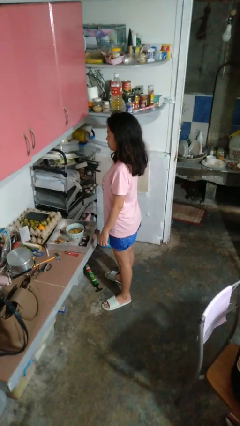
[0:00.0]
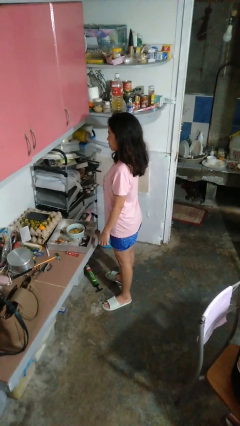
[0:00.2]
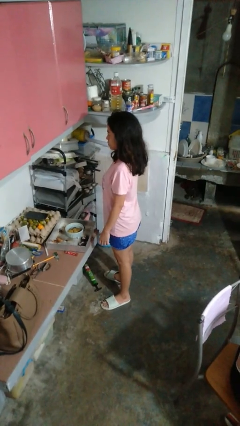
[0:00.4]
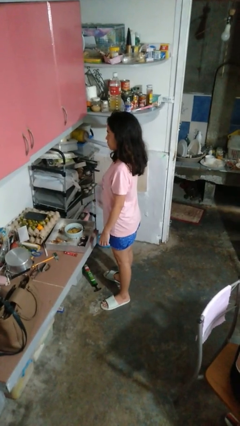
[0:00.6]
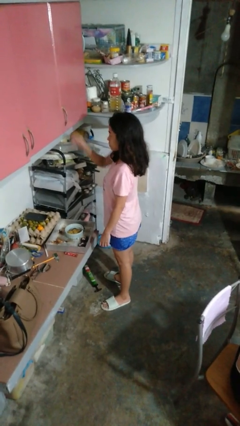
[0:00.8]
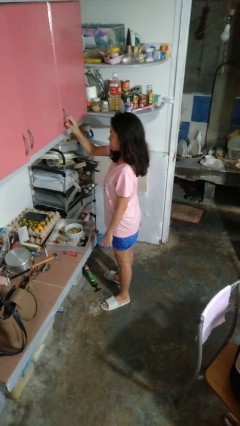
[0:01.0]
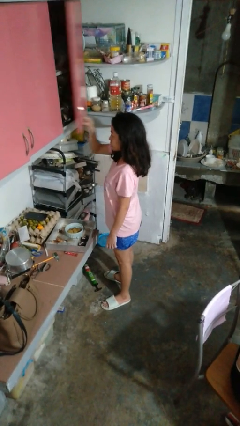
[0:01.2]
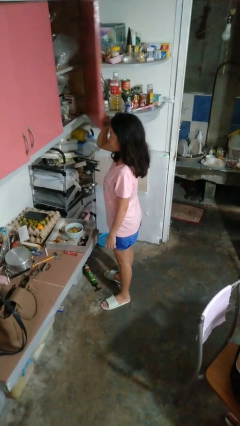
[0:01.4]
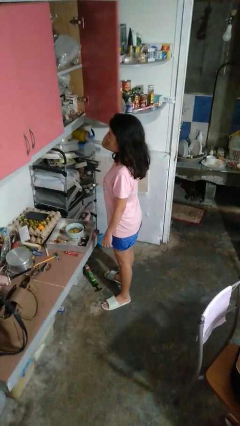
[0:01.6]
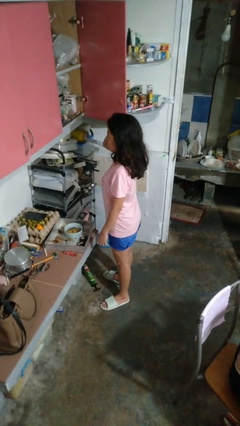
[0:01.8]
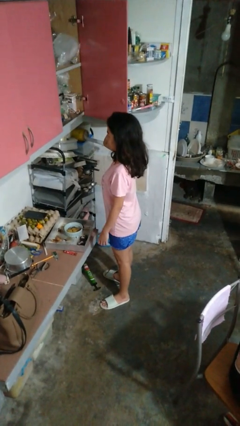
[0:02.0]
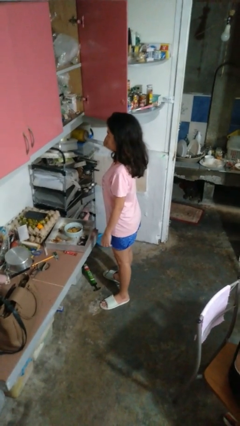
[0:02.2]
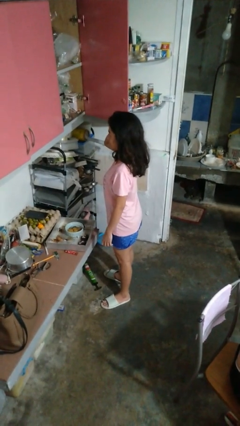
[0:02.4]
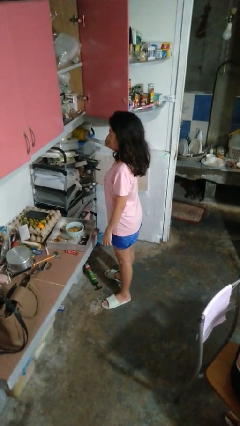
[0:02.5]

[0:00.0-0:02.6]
person opens cabinet

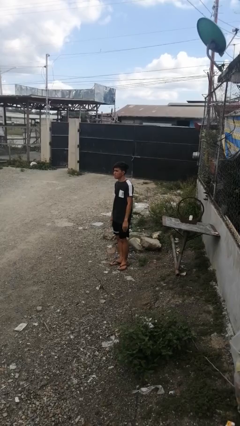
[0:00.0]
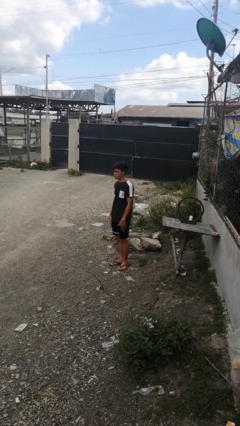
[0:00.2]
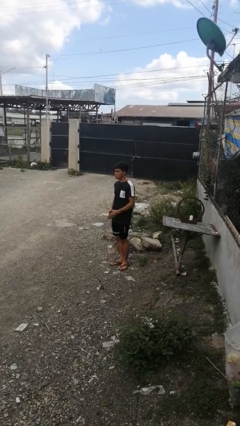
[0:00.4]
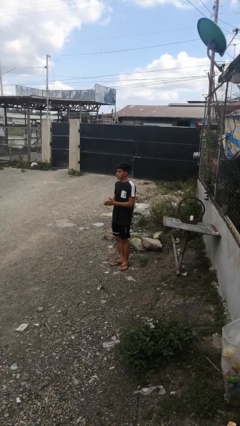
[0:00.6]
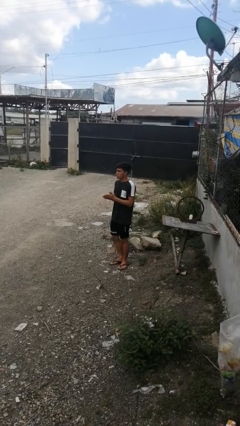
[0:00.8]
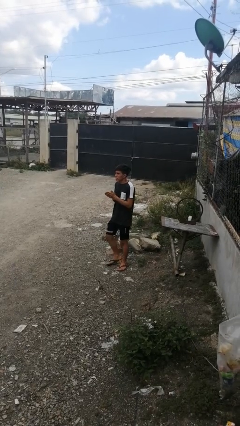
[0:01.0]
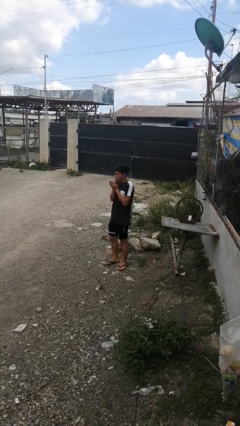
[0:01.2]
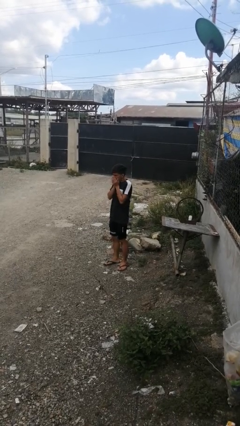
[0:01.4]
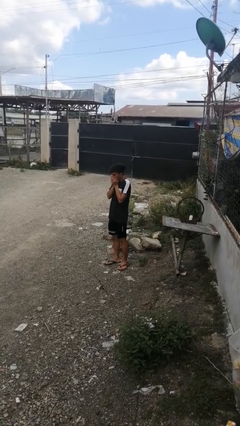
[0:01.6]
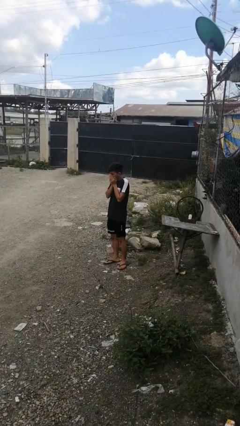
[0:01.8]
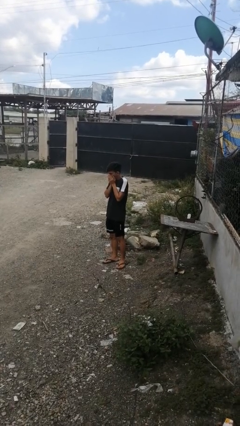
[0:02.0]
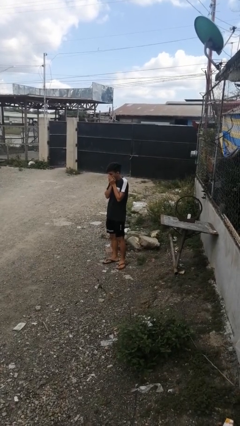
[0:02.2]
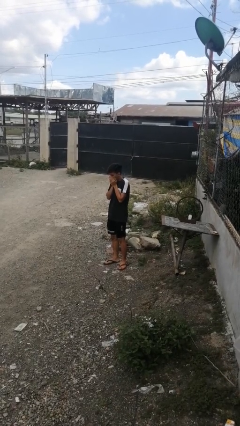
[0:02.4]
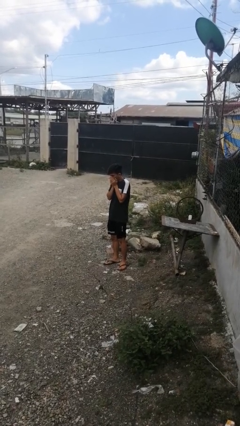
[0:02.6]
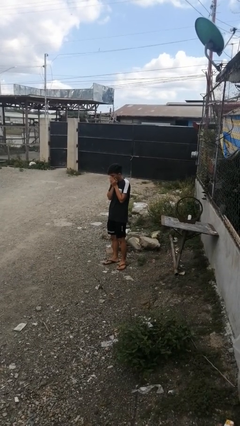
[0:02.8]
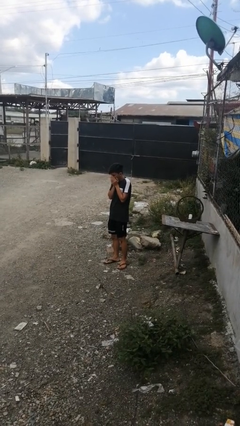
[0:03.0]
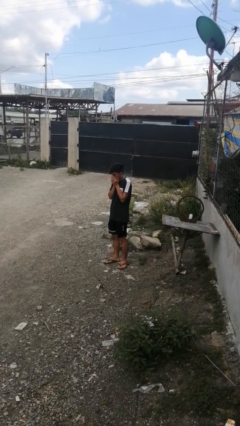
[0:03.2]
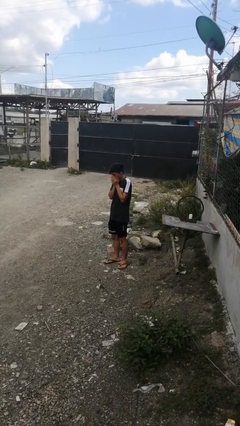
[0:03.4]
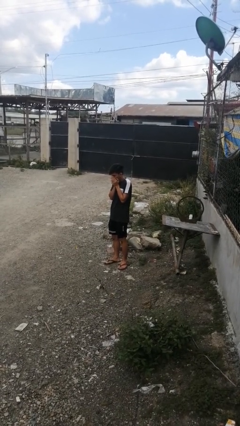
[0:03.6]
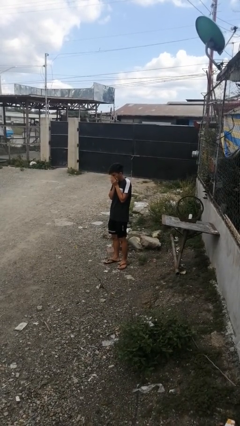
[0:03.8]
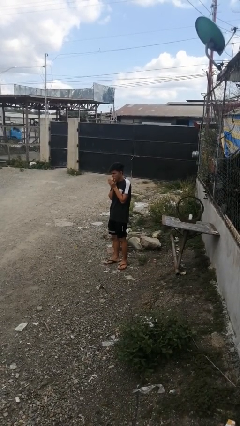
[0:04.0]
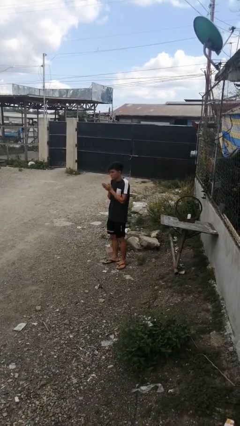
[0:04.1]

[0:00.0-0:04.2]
person blows into hands

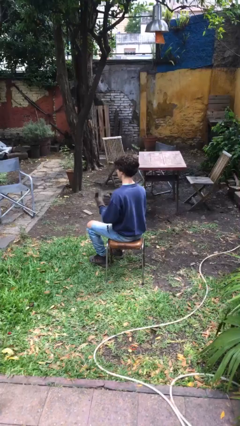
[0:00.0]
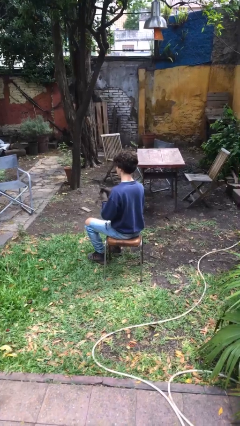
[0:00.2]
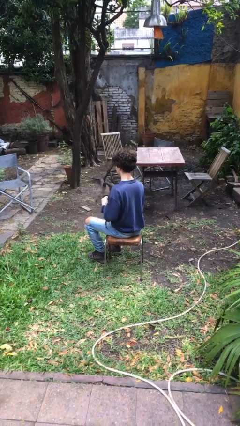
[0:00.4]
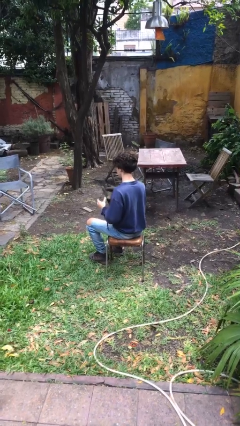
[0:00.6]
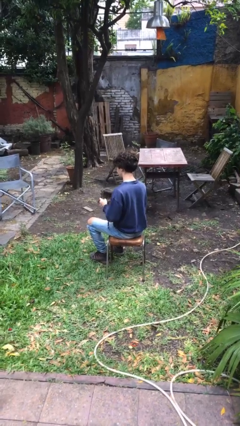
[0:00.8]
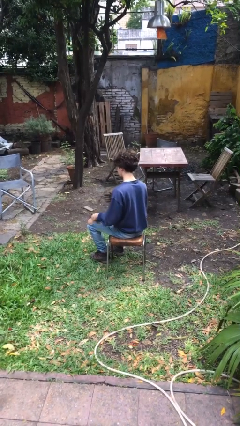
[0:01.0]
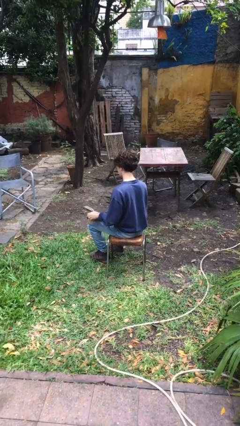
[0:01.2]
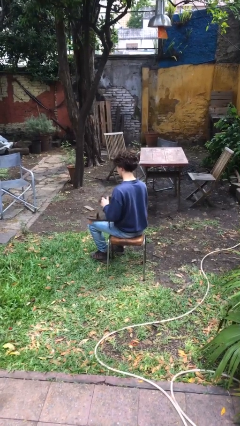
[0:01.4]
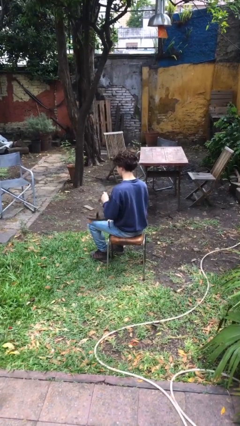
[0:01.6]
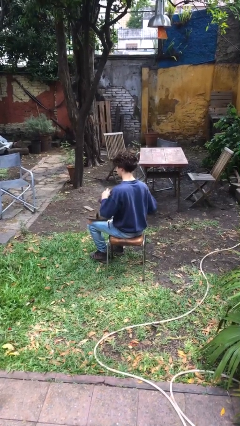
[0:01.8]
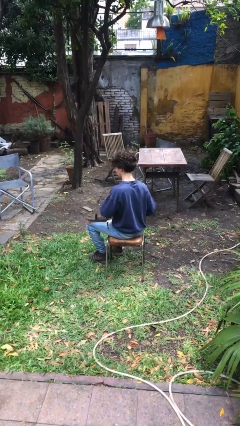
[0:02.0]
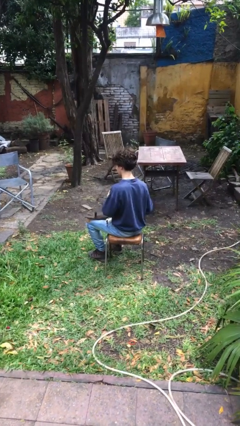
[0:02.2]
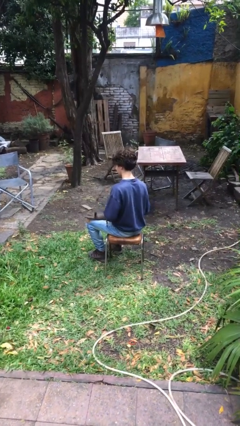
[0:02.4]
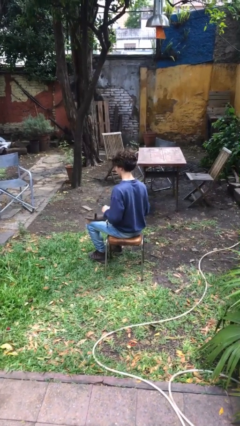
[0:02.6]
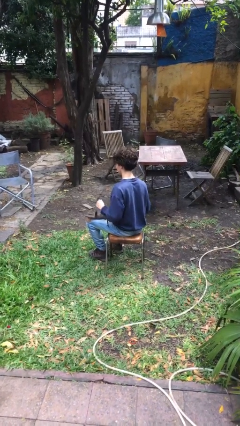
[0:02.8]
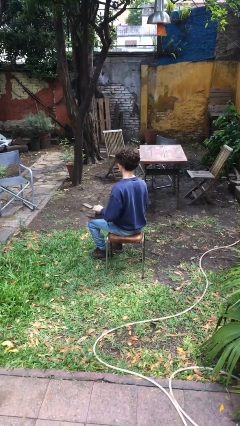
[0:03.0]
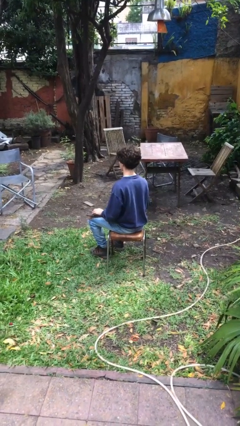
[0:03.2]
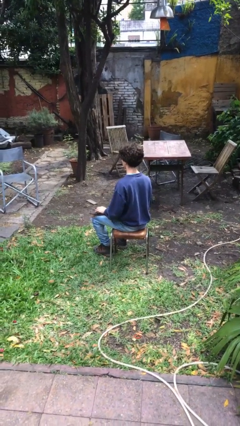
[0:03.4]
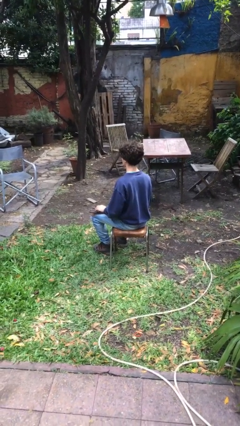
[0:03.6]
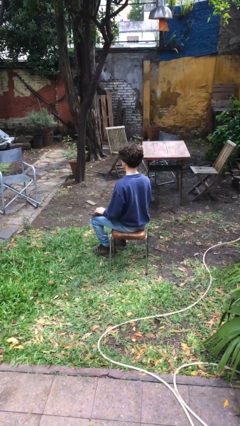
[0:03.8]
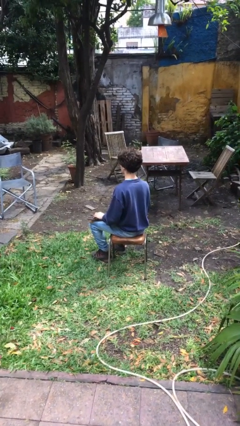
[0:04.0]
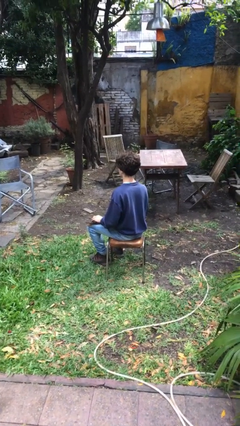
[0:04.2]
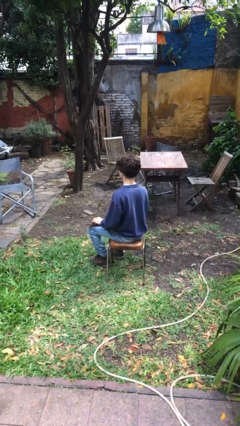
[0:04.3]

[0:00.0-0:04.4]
person takes off gloves

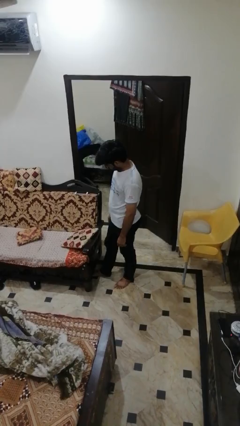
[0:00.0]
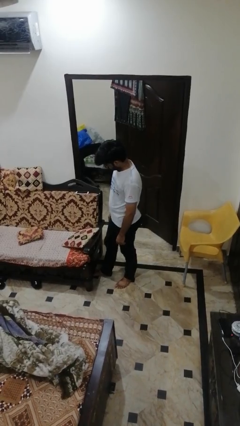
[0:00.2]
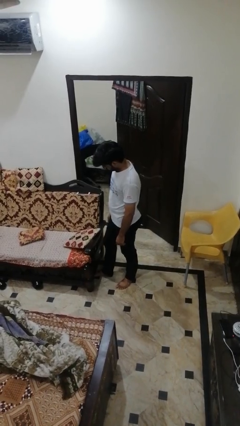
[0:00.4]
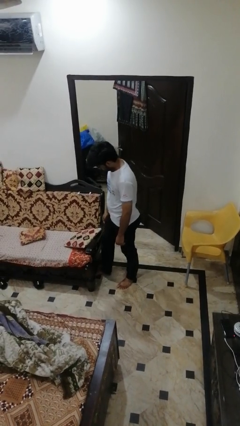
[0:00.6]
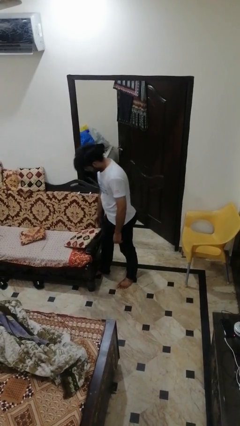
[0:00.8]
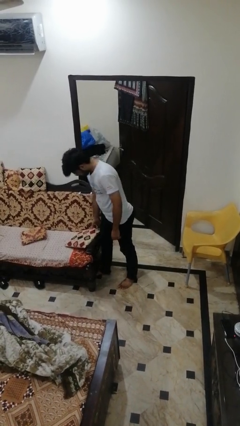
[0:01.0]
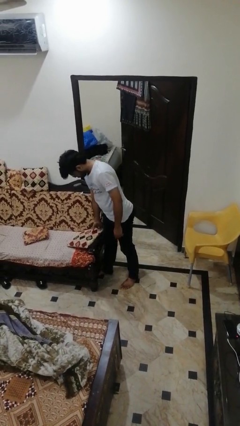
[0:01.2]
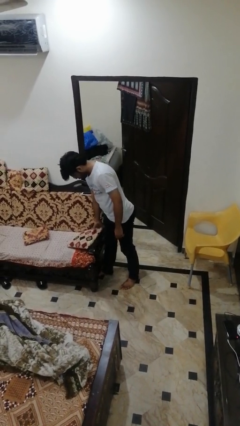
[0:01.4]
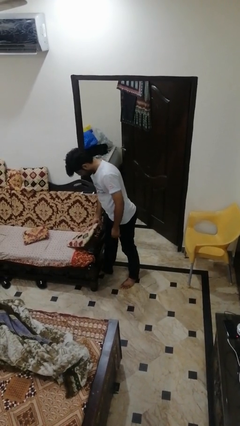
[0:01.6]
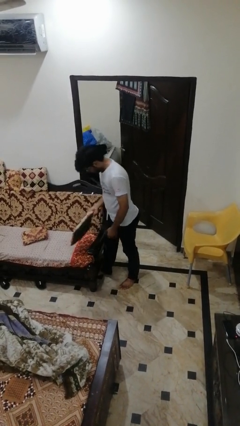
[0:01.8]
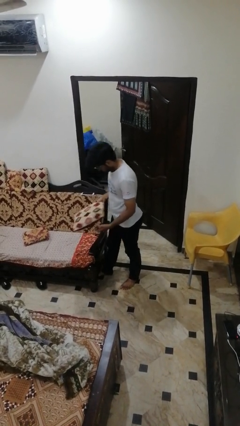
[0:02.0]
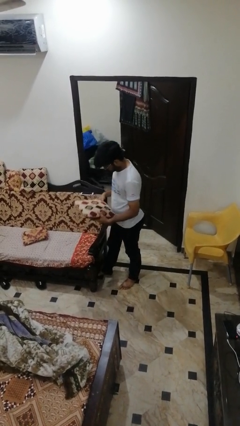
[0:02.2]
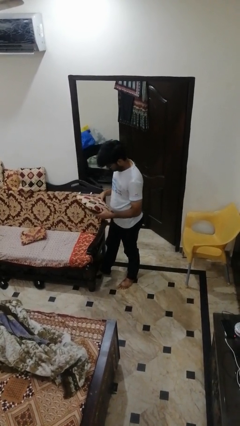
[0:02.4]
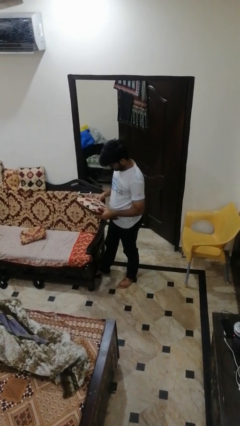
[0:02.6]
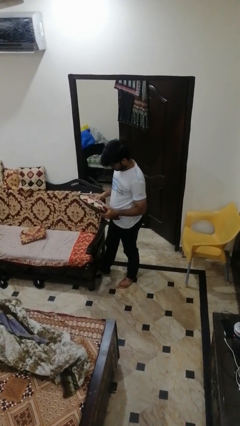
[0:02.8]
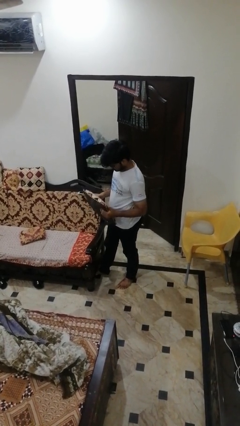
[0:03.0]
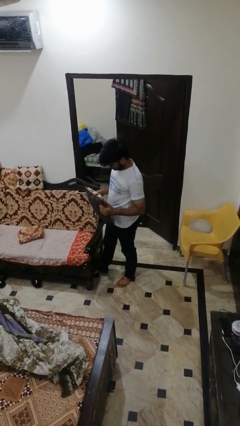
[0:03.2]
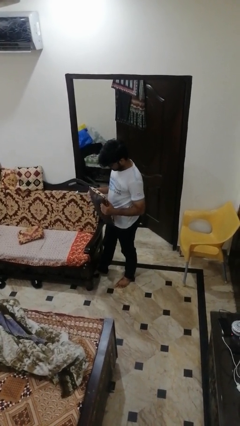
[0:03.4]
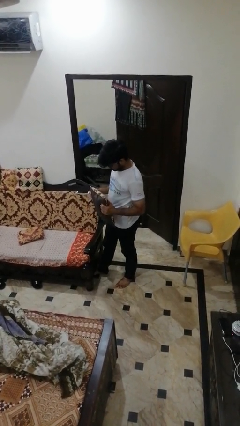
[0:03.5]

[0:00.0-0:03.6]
person picks up object from couch

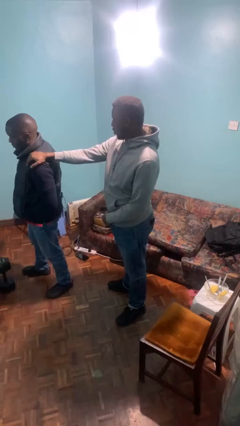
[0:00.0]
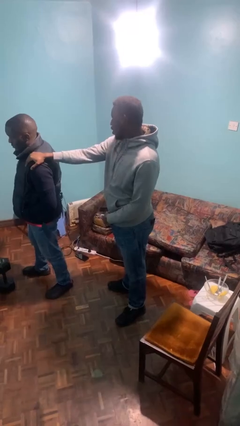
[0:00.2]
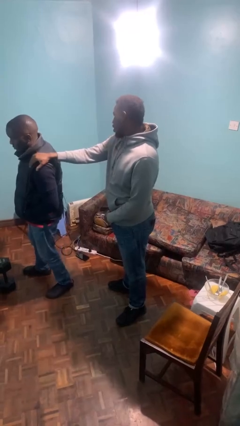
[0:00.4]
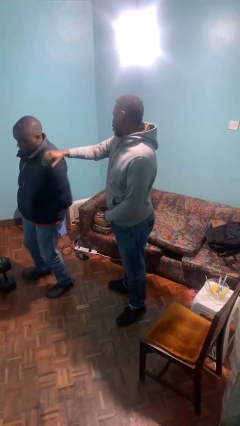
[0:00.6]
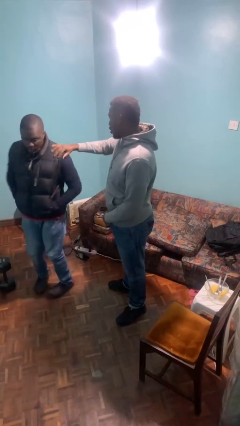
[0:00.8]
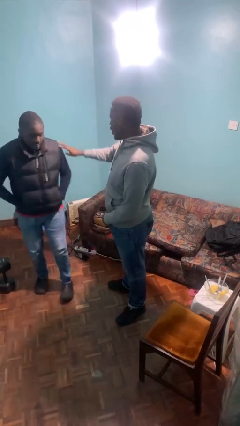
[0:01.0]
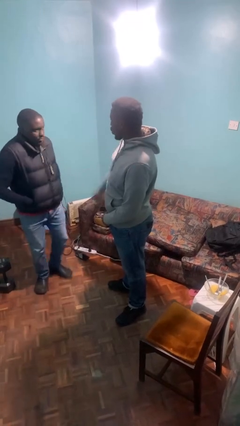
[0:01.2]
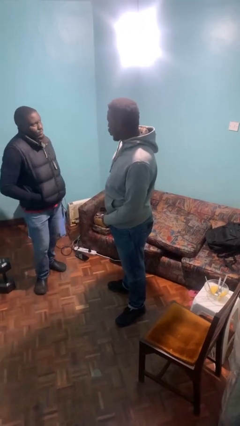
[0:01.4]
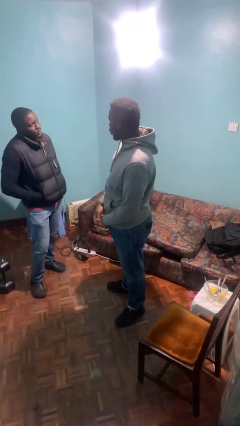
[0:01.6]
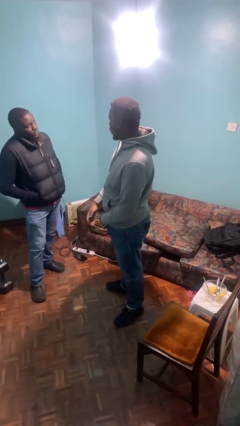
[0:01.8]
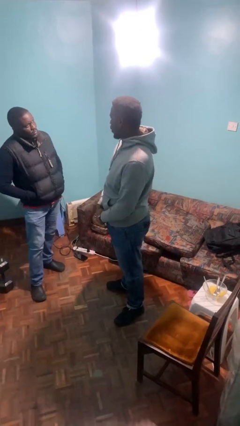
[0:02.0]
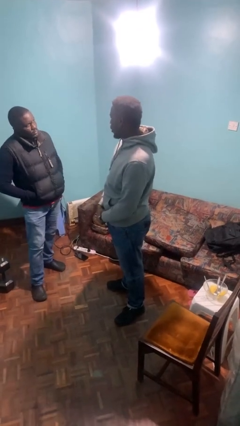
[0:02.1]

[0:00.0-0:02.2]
person spins person around

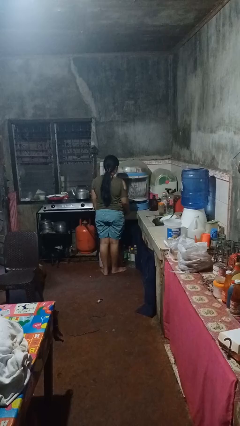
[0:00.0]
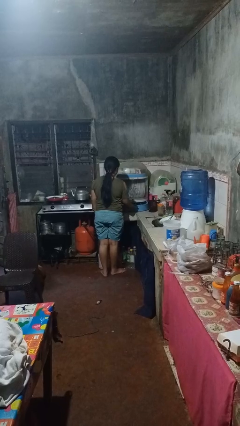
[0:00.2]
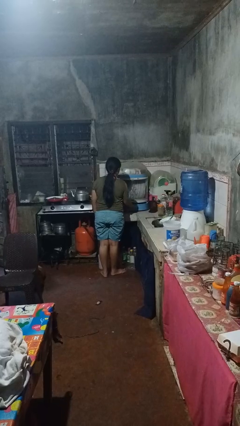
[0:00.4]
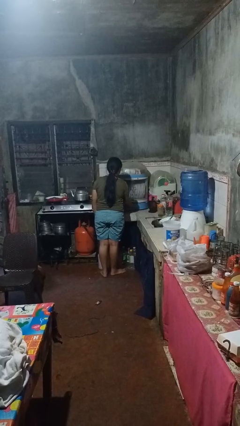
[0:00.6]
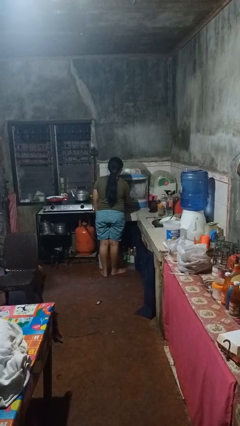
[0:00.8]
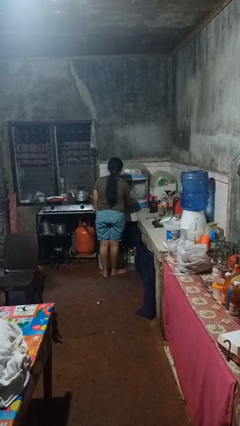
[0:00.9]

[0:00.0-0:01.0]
person closes kitchen drawer
